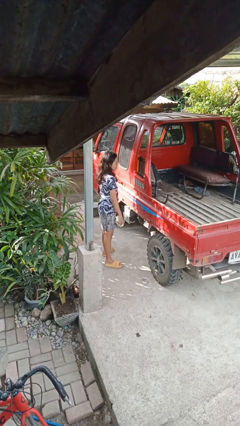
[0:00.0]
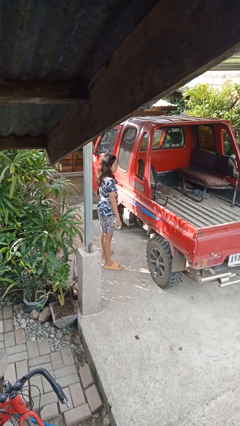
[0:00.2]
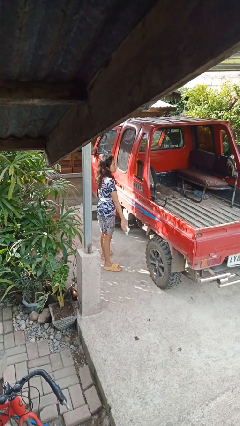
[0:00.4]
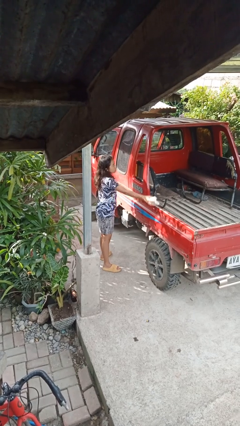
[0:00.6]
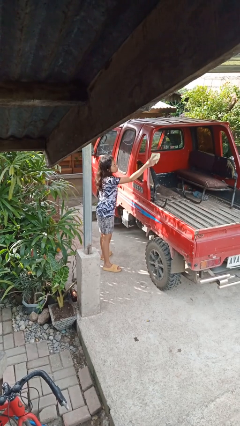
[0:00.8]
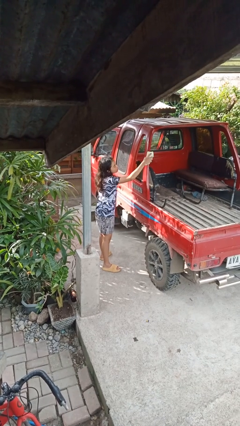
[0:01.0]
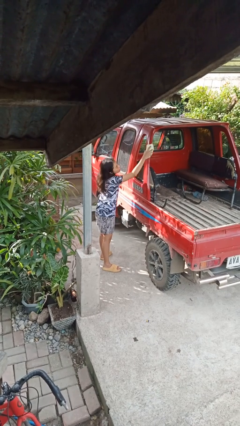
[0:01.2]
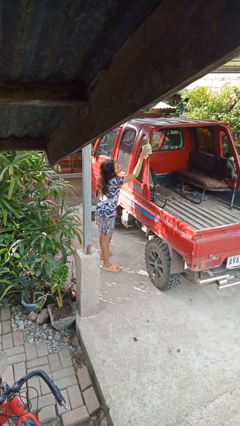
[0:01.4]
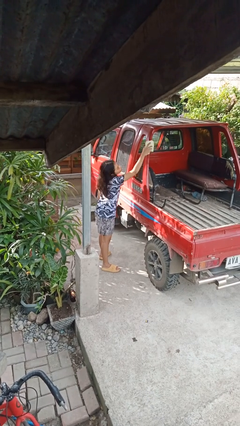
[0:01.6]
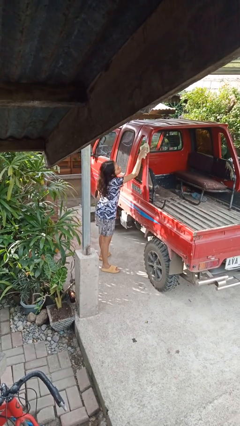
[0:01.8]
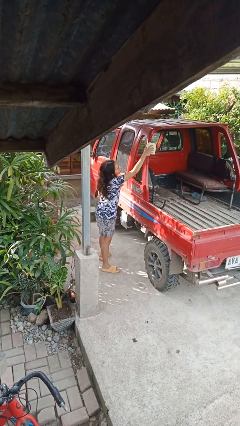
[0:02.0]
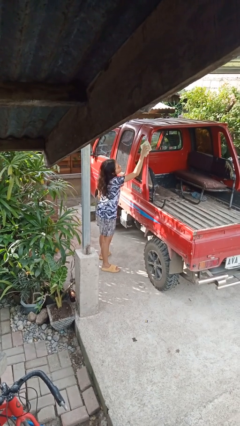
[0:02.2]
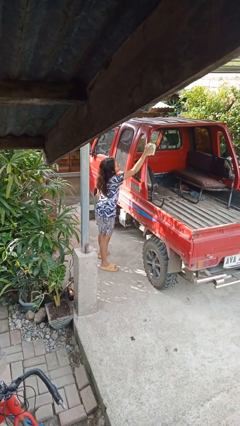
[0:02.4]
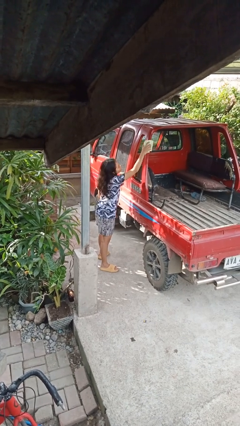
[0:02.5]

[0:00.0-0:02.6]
person polishes car with rag

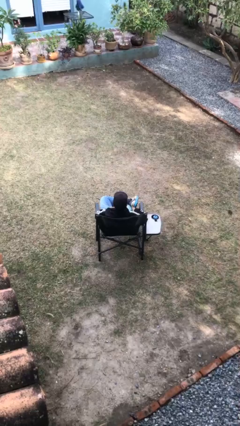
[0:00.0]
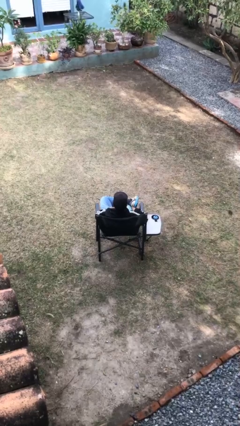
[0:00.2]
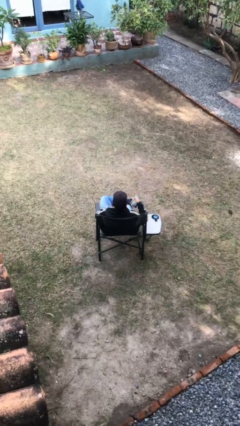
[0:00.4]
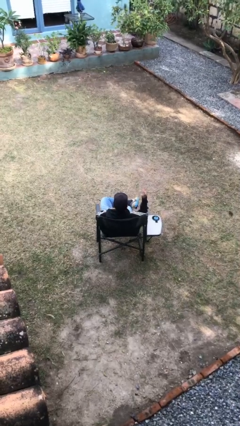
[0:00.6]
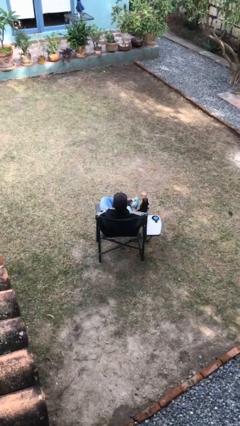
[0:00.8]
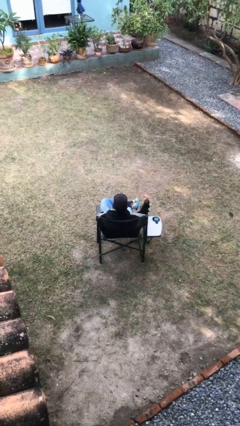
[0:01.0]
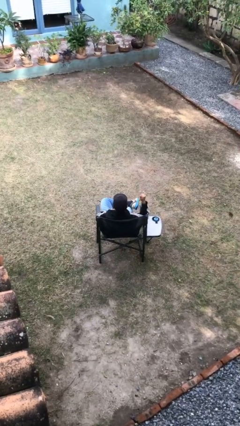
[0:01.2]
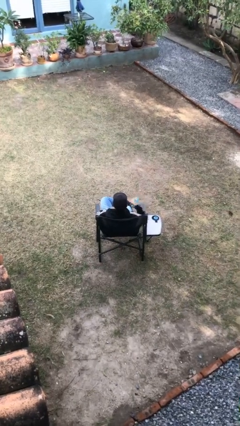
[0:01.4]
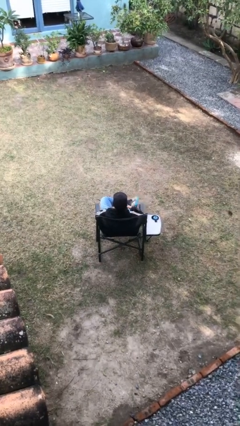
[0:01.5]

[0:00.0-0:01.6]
person gestures hang loose

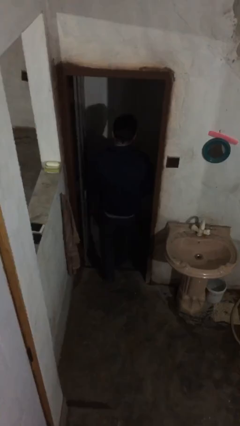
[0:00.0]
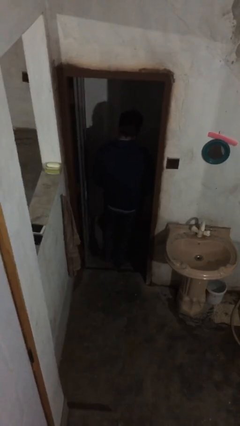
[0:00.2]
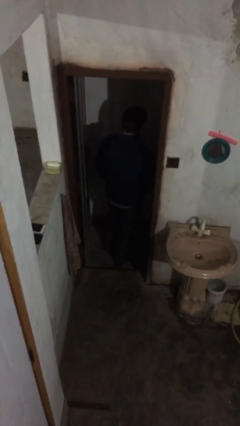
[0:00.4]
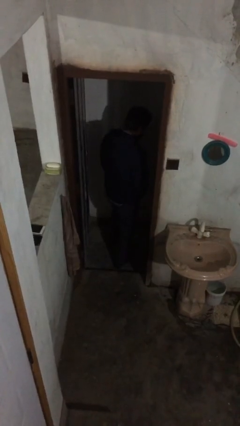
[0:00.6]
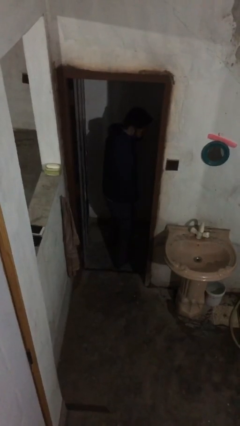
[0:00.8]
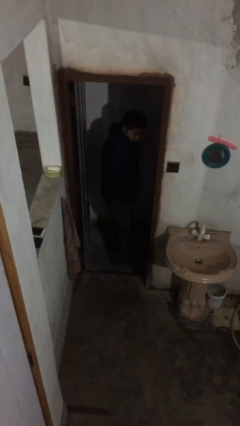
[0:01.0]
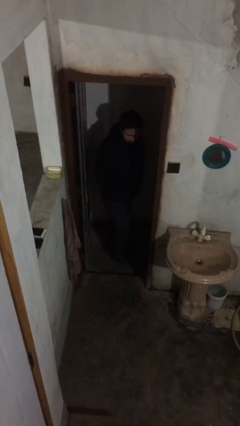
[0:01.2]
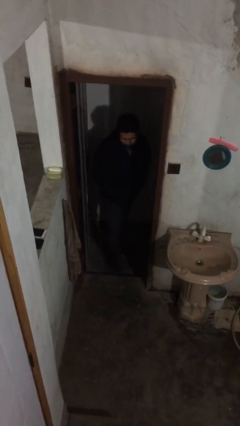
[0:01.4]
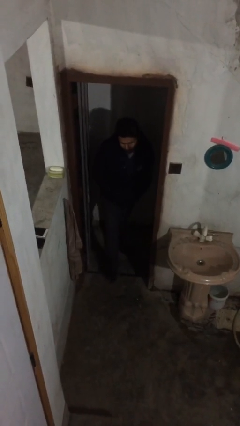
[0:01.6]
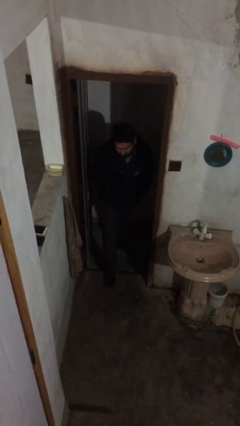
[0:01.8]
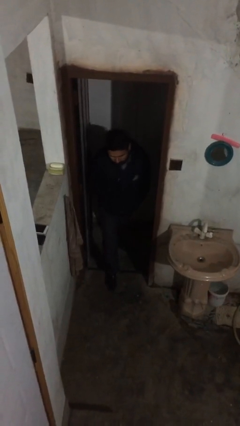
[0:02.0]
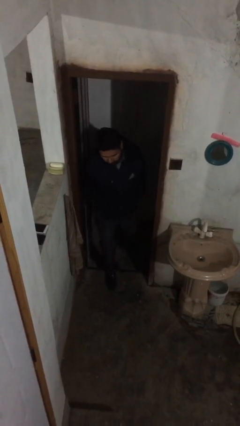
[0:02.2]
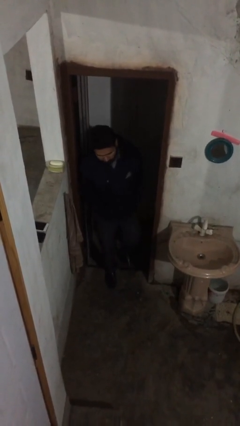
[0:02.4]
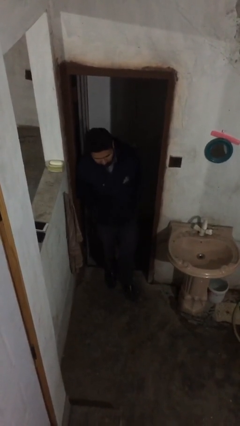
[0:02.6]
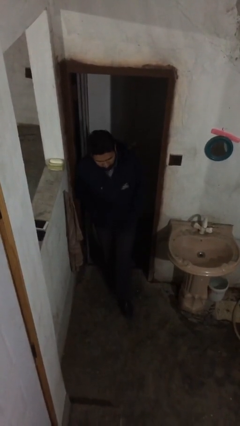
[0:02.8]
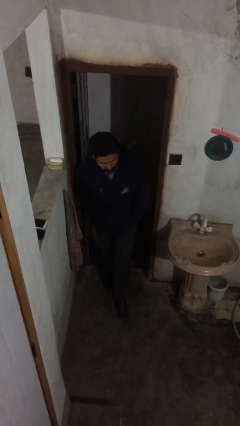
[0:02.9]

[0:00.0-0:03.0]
person enters scene through structure

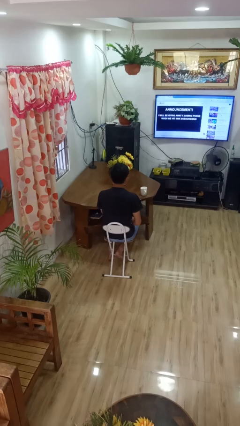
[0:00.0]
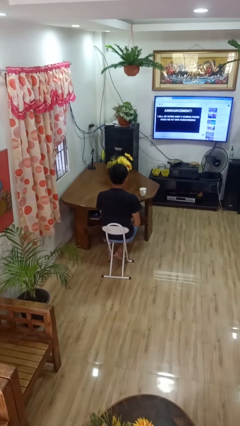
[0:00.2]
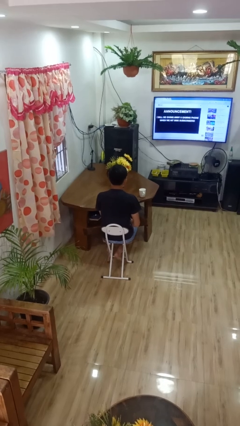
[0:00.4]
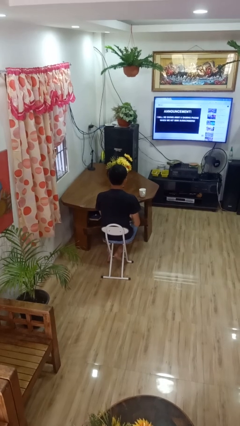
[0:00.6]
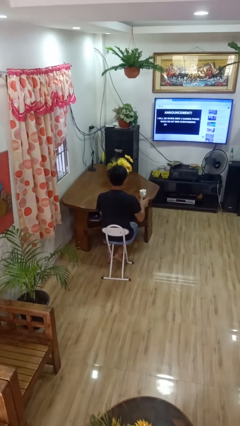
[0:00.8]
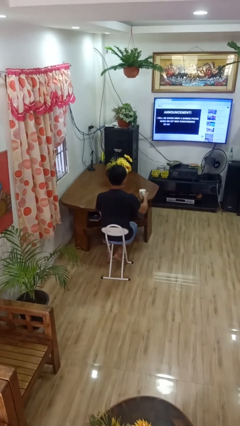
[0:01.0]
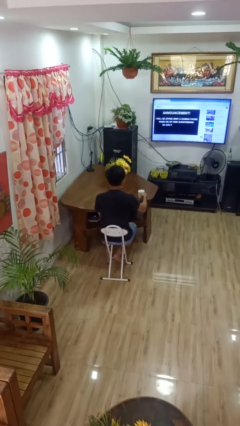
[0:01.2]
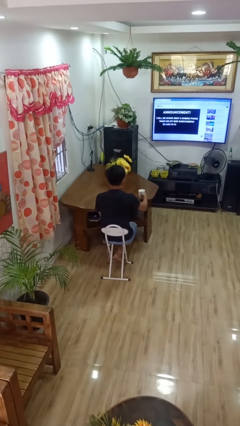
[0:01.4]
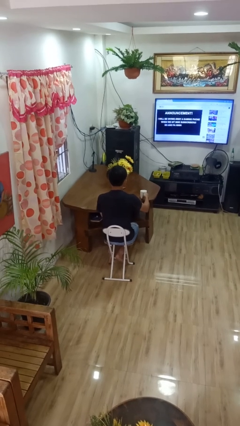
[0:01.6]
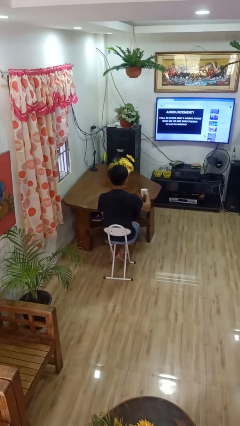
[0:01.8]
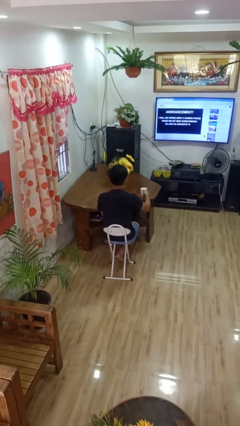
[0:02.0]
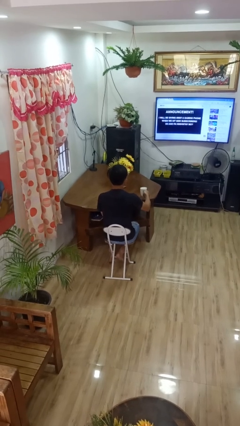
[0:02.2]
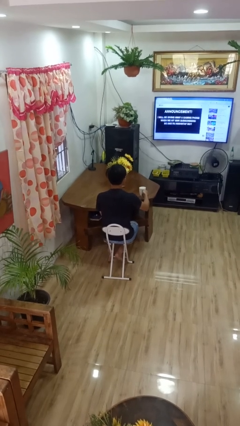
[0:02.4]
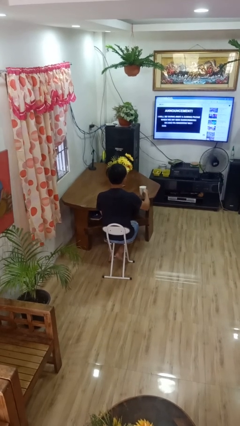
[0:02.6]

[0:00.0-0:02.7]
person picks up object from table

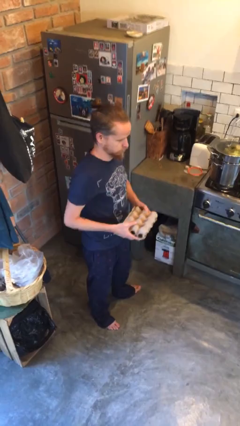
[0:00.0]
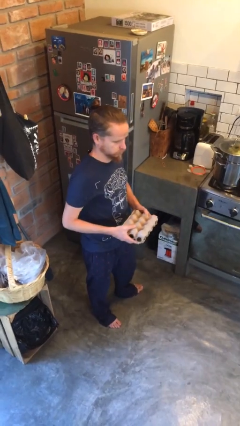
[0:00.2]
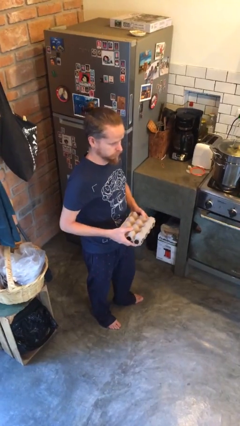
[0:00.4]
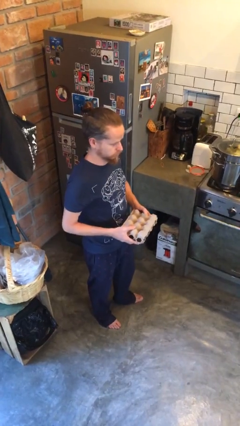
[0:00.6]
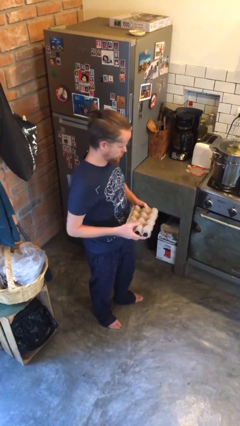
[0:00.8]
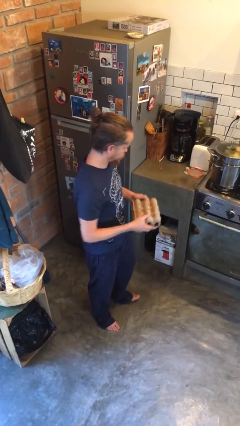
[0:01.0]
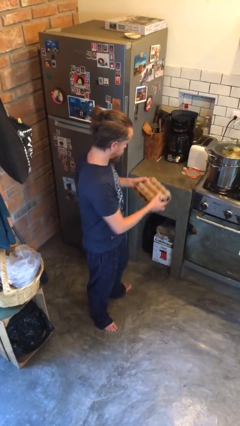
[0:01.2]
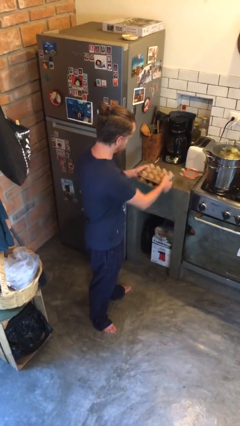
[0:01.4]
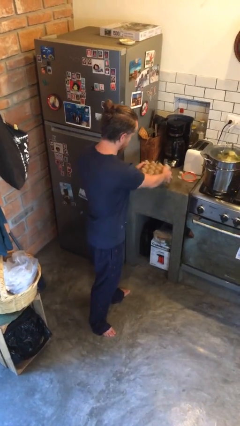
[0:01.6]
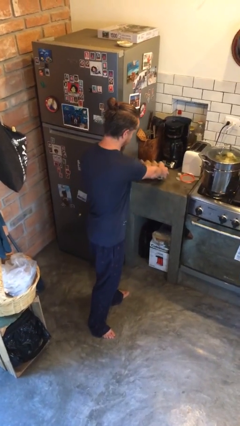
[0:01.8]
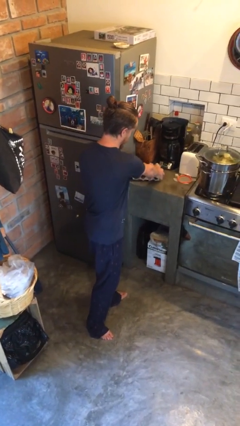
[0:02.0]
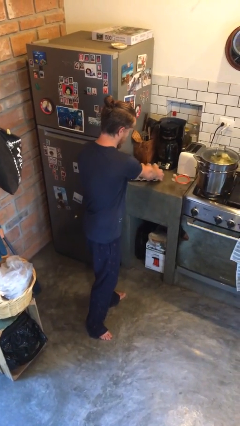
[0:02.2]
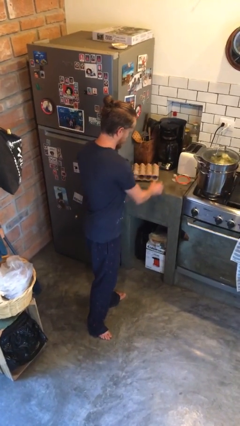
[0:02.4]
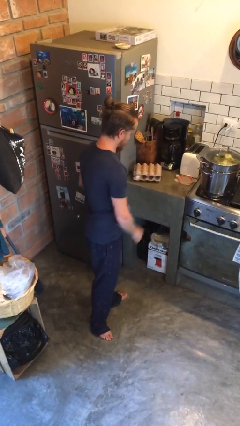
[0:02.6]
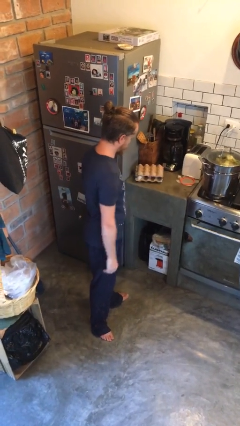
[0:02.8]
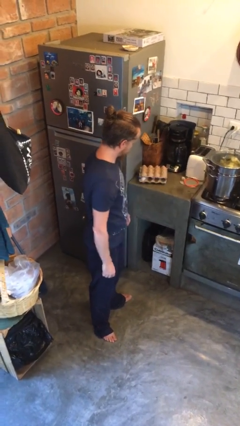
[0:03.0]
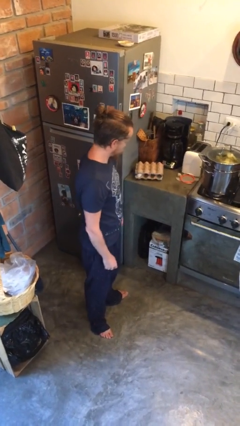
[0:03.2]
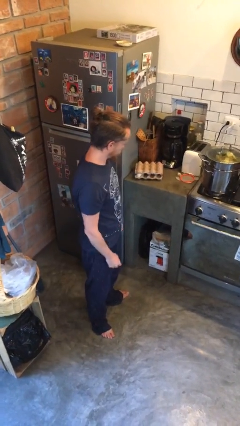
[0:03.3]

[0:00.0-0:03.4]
person puts down object on countertop

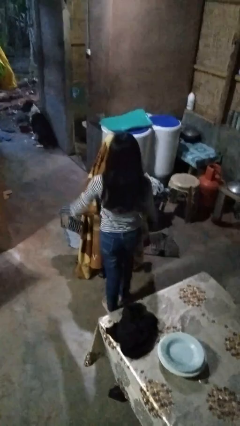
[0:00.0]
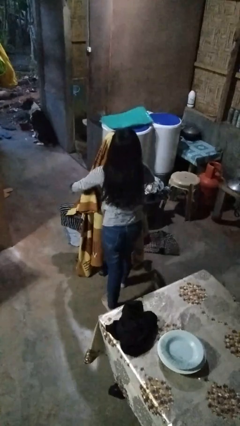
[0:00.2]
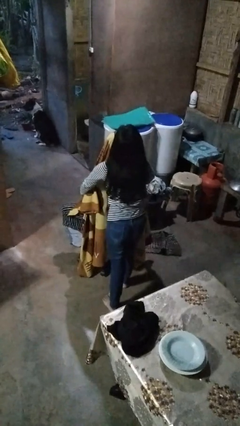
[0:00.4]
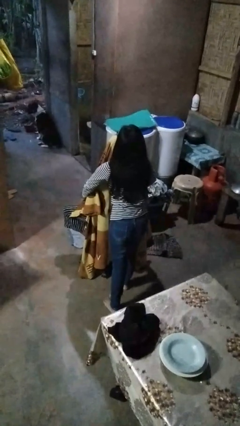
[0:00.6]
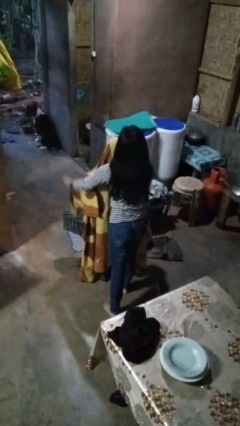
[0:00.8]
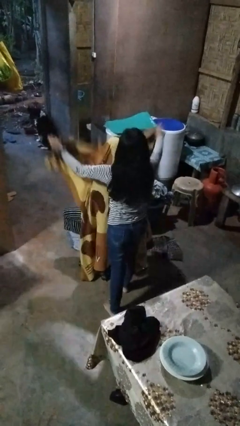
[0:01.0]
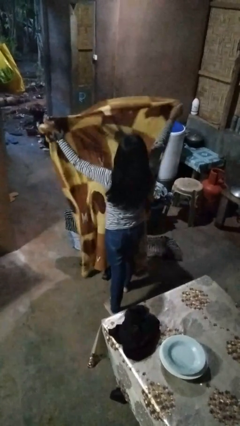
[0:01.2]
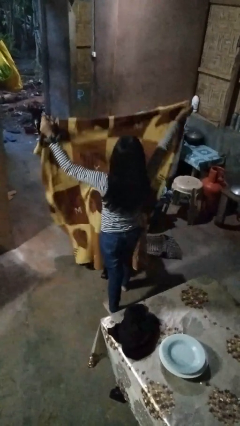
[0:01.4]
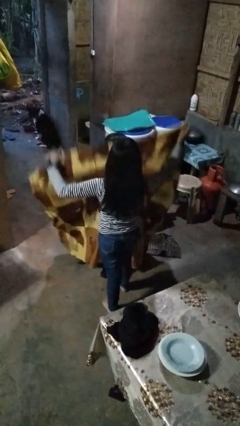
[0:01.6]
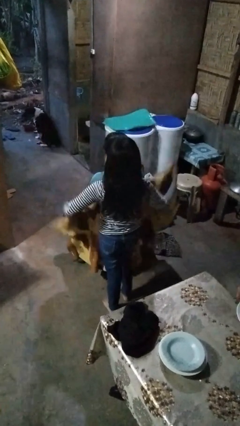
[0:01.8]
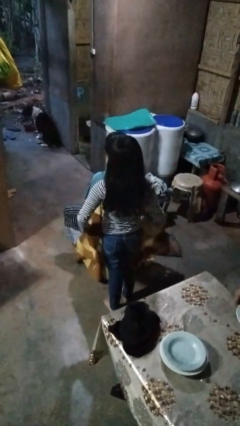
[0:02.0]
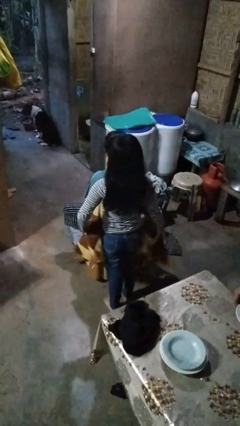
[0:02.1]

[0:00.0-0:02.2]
person uncovers friend with blanket

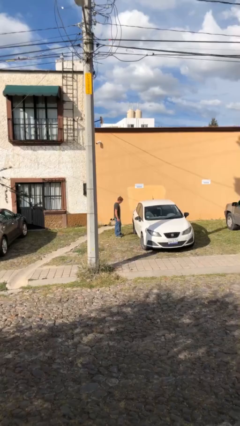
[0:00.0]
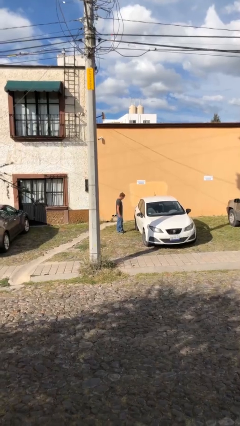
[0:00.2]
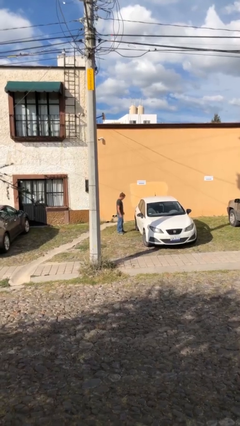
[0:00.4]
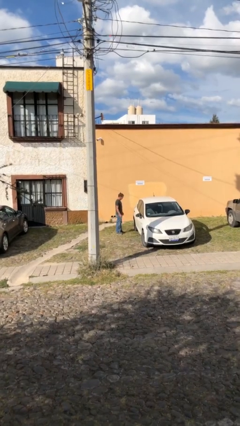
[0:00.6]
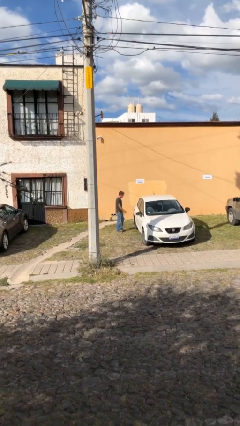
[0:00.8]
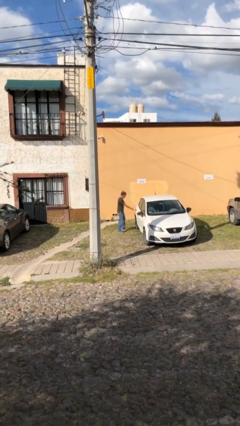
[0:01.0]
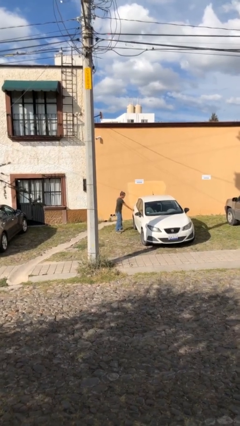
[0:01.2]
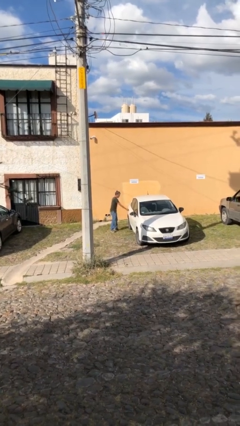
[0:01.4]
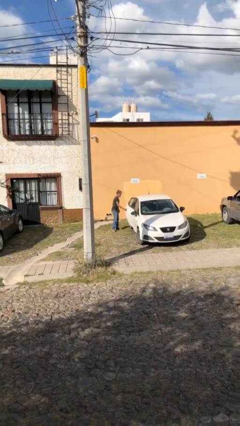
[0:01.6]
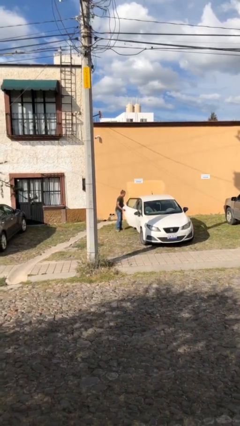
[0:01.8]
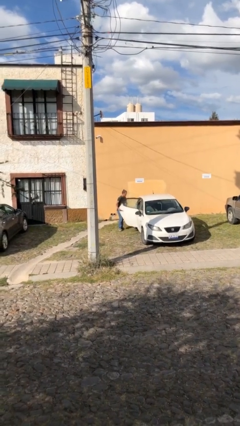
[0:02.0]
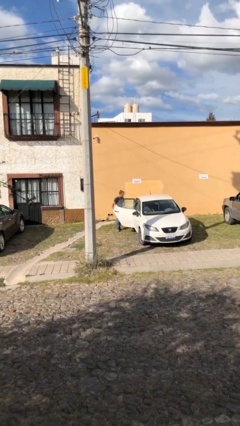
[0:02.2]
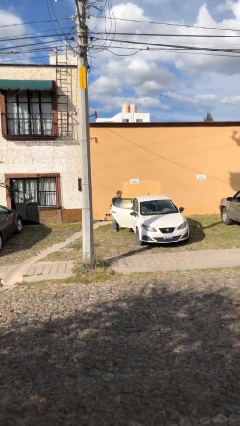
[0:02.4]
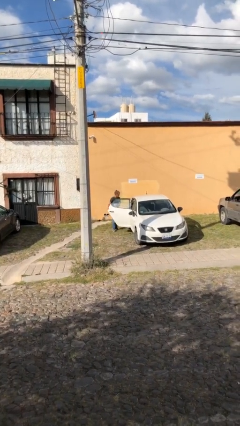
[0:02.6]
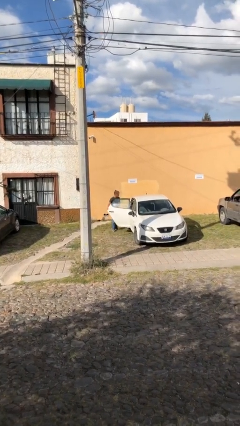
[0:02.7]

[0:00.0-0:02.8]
person opens car door
